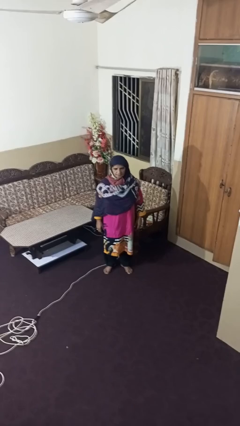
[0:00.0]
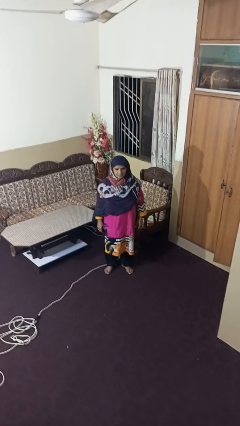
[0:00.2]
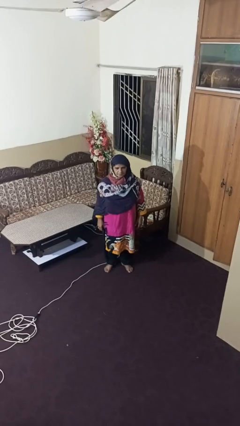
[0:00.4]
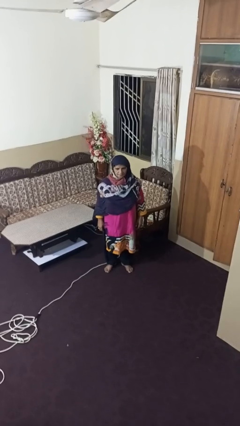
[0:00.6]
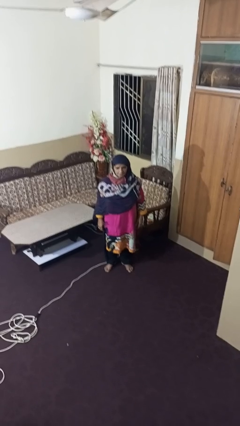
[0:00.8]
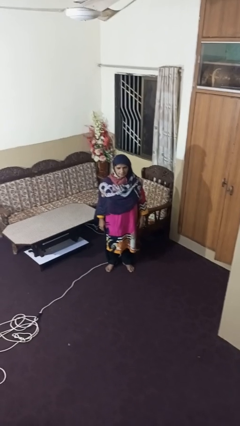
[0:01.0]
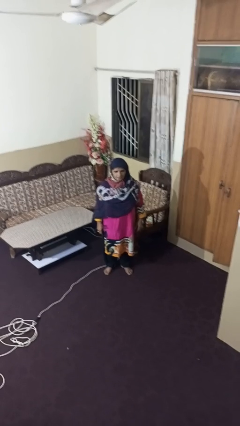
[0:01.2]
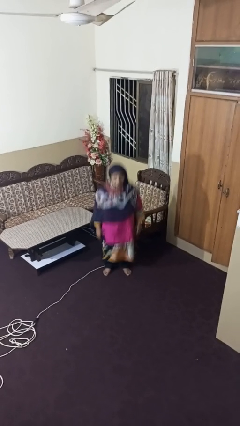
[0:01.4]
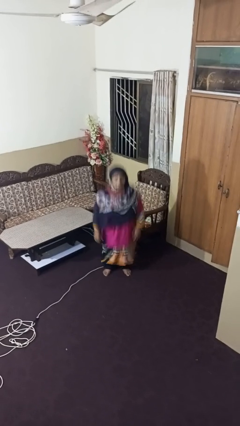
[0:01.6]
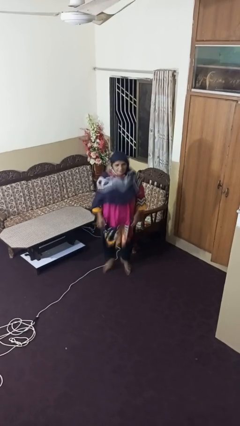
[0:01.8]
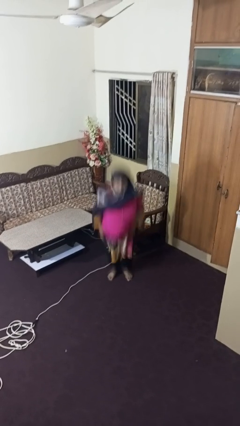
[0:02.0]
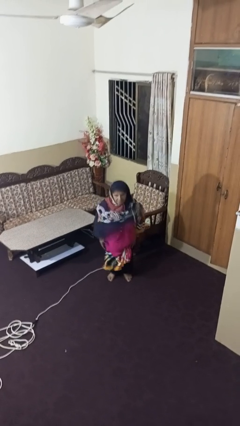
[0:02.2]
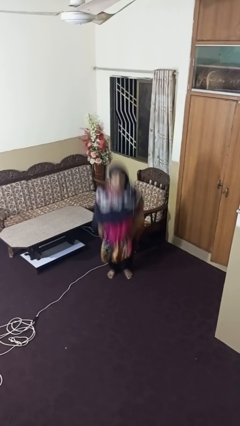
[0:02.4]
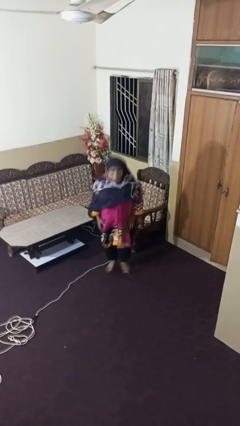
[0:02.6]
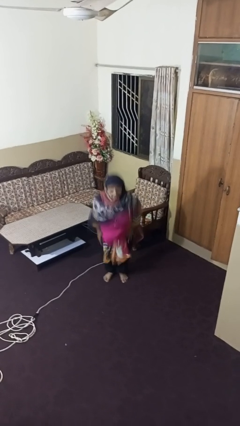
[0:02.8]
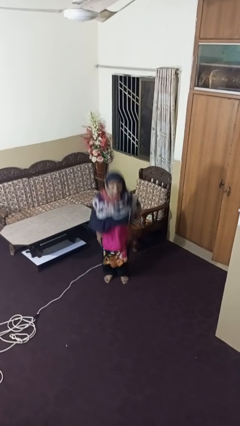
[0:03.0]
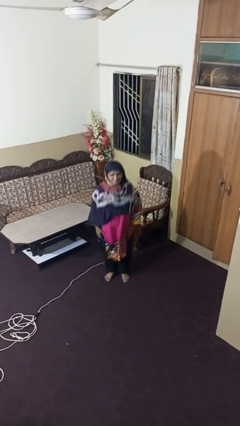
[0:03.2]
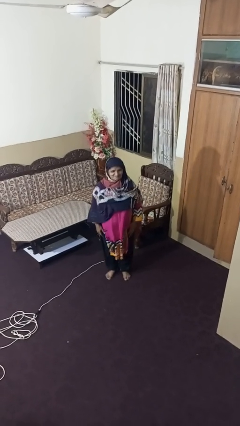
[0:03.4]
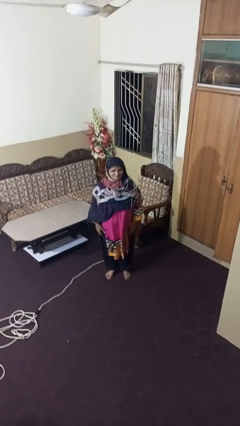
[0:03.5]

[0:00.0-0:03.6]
person jumps

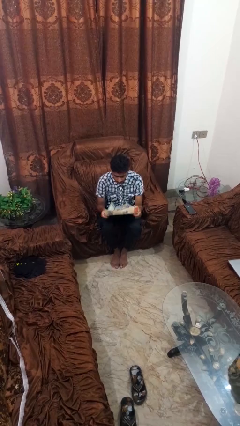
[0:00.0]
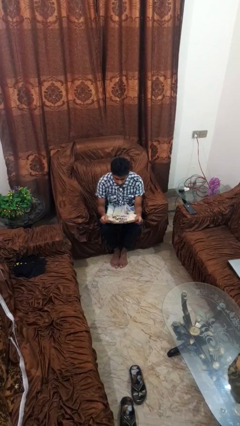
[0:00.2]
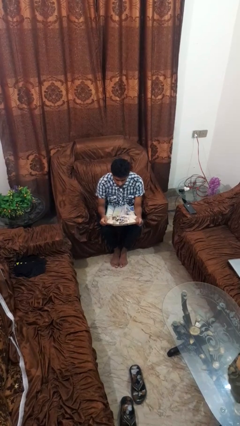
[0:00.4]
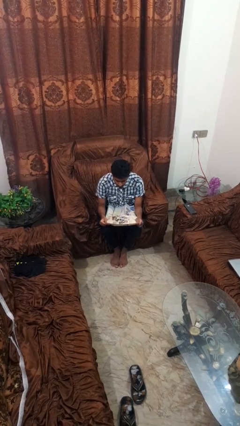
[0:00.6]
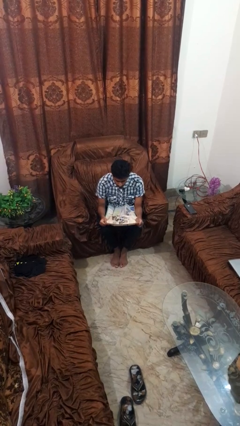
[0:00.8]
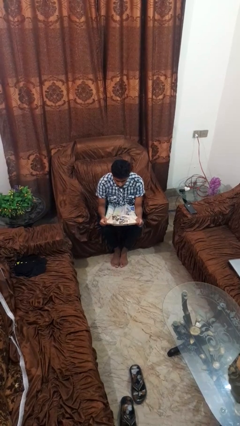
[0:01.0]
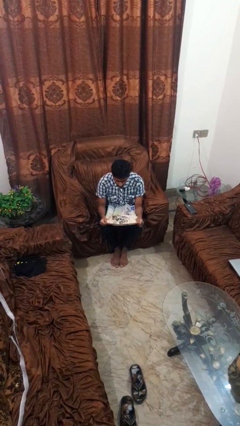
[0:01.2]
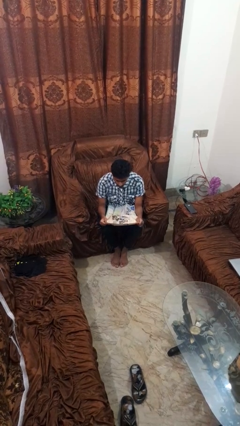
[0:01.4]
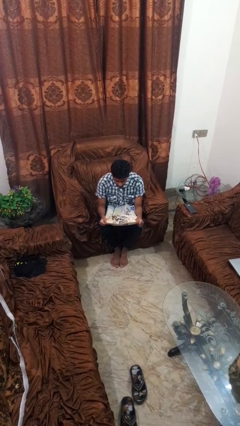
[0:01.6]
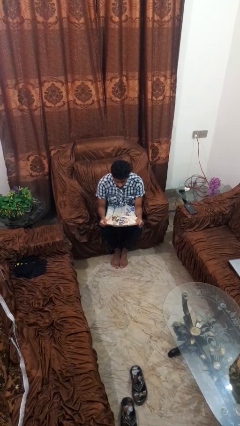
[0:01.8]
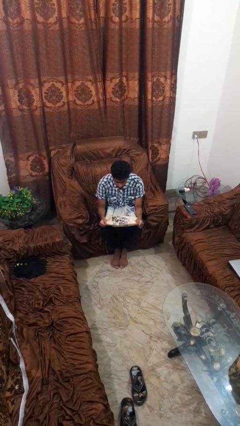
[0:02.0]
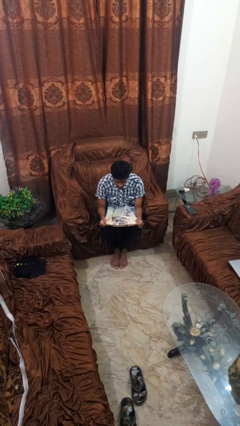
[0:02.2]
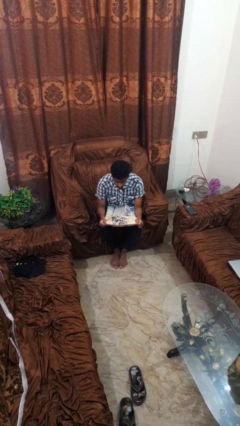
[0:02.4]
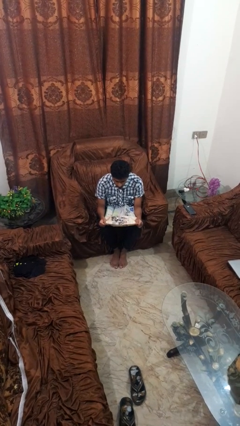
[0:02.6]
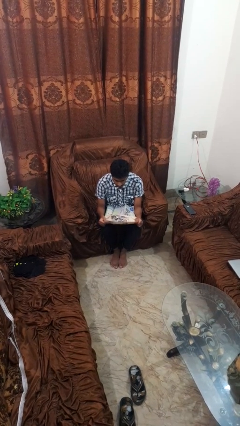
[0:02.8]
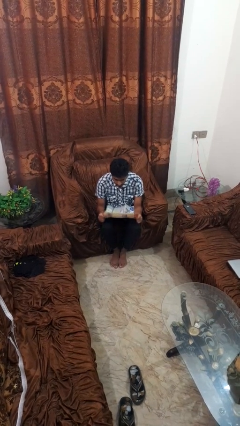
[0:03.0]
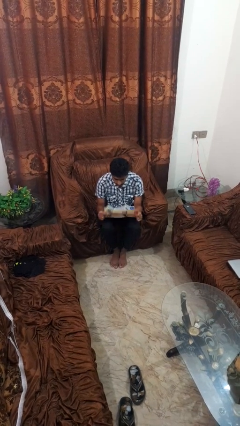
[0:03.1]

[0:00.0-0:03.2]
person reads newspaper

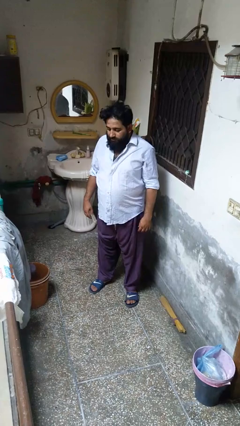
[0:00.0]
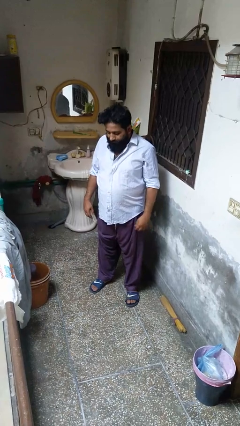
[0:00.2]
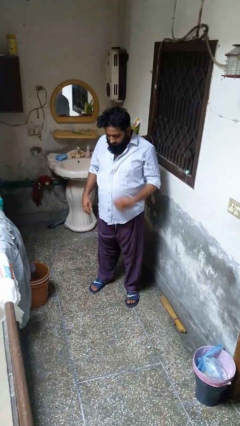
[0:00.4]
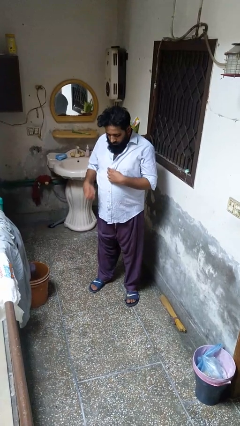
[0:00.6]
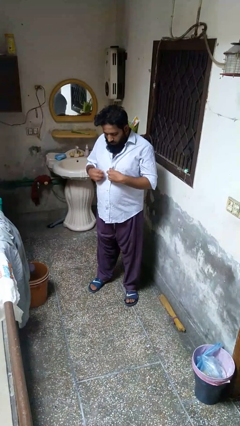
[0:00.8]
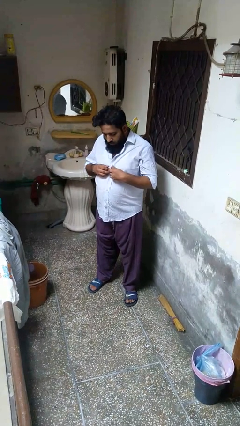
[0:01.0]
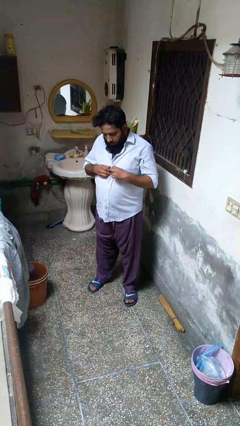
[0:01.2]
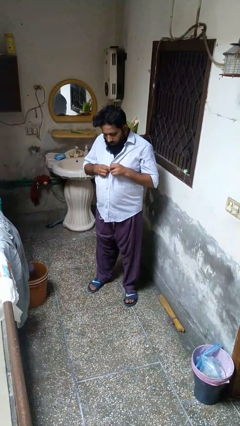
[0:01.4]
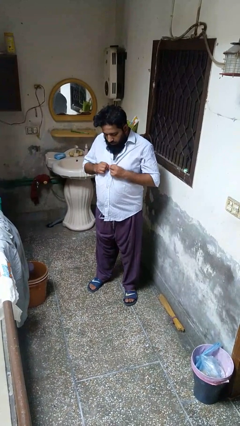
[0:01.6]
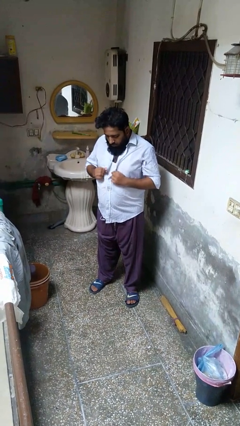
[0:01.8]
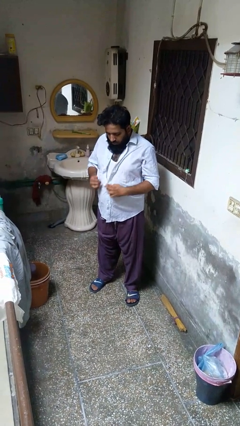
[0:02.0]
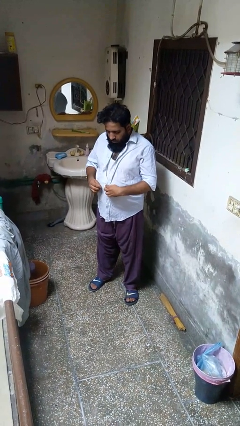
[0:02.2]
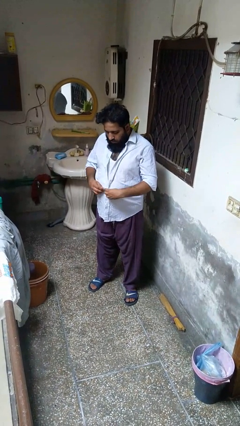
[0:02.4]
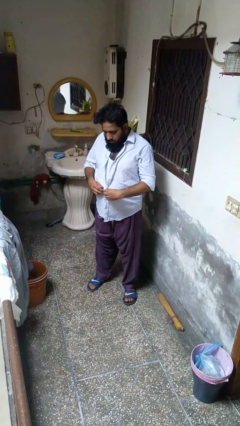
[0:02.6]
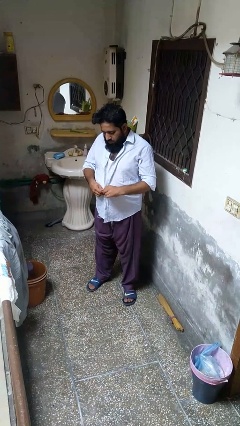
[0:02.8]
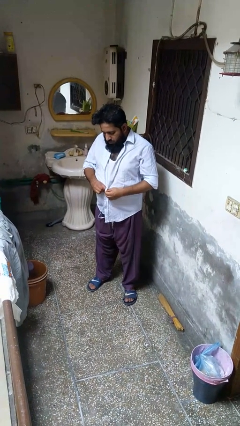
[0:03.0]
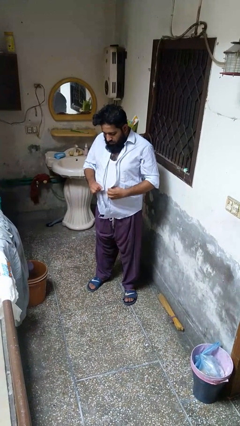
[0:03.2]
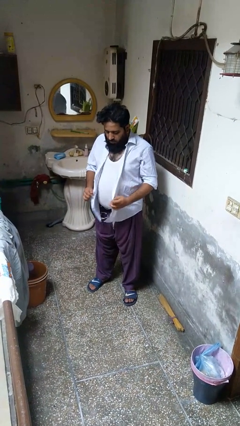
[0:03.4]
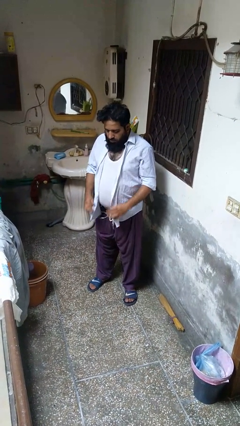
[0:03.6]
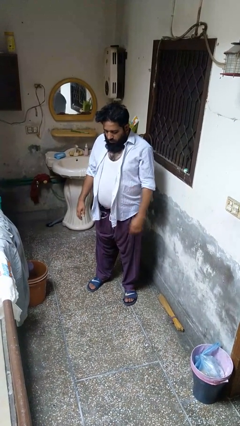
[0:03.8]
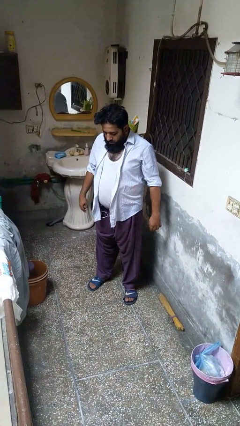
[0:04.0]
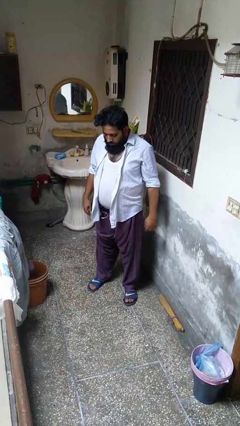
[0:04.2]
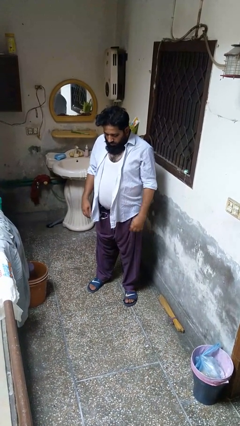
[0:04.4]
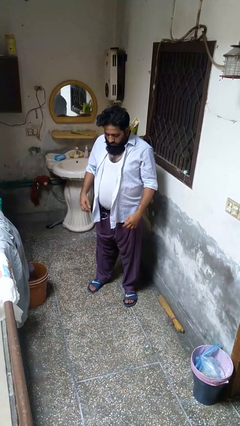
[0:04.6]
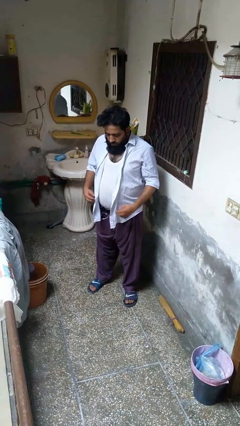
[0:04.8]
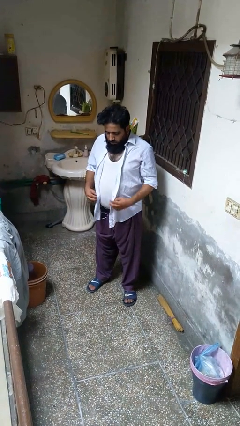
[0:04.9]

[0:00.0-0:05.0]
person unbuttons shirt

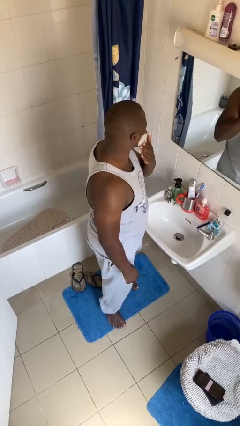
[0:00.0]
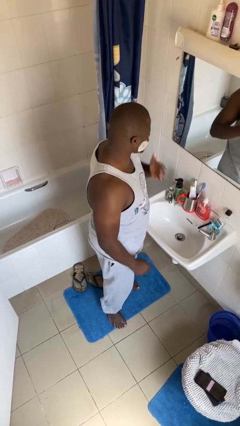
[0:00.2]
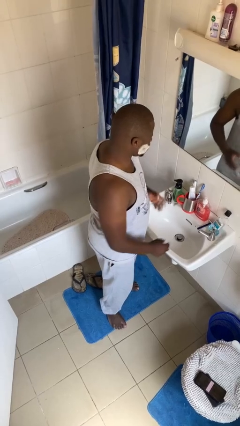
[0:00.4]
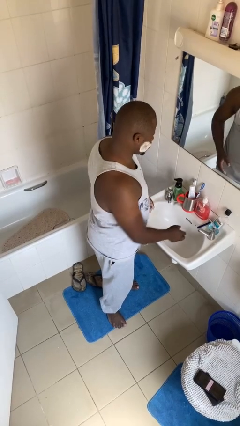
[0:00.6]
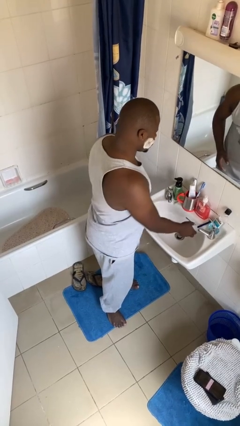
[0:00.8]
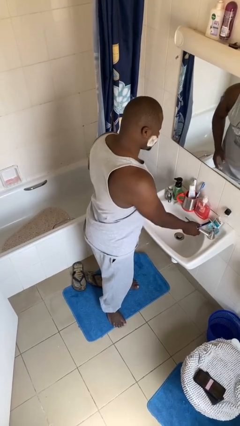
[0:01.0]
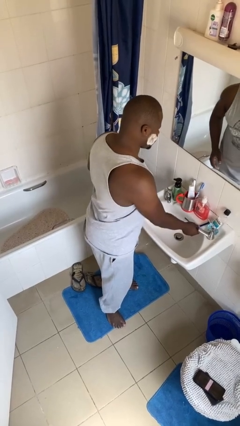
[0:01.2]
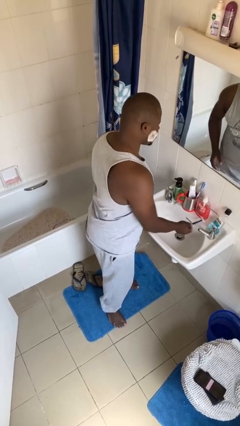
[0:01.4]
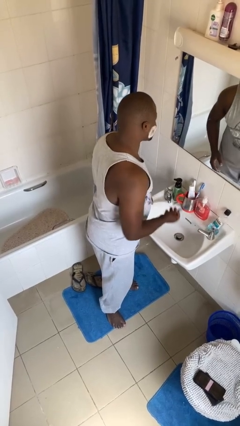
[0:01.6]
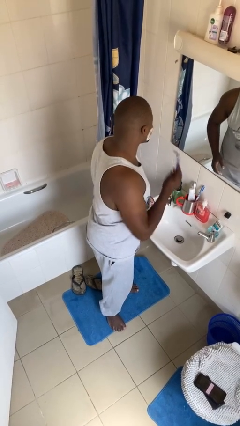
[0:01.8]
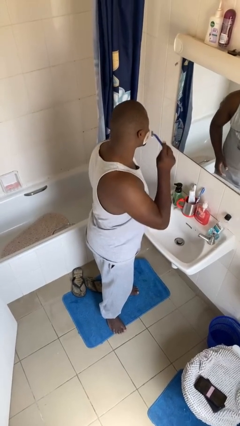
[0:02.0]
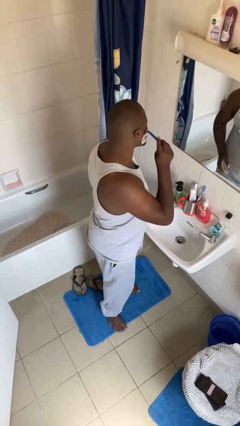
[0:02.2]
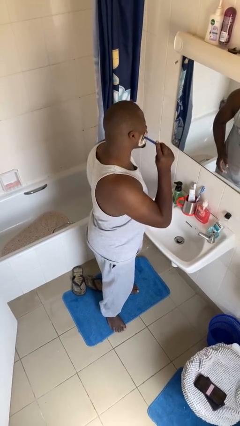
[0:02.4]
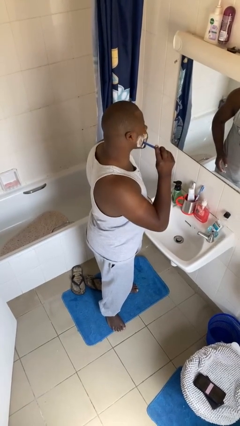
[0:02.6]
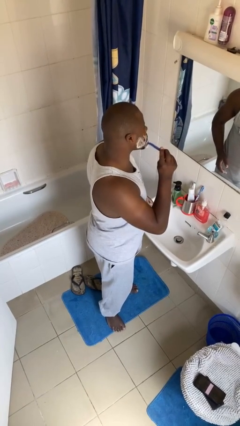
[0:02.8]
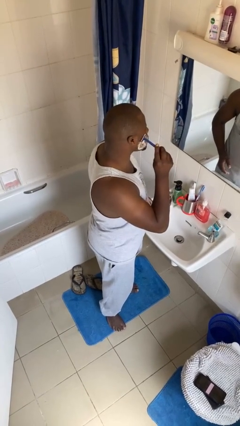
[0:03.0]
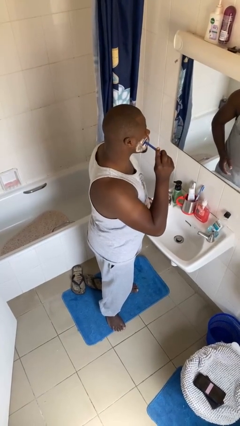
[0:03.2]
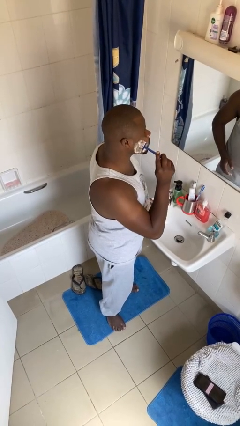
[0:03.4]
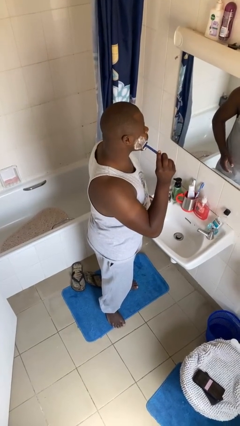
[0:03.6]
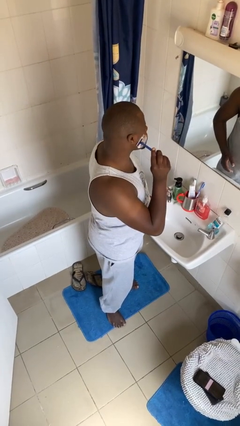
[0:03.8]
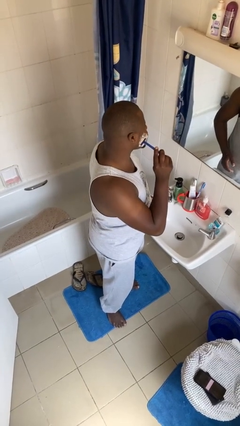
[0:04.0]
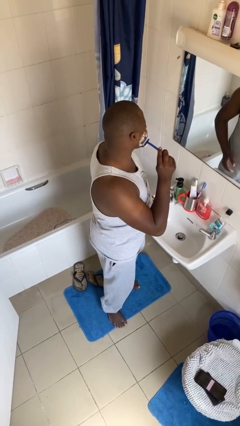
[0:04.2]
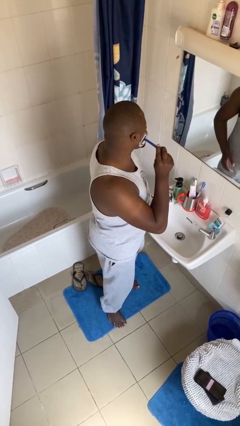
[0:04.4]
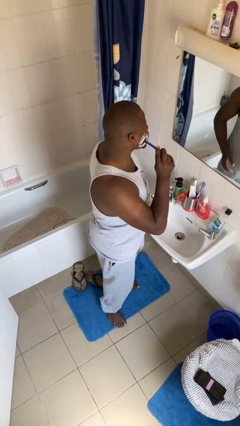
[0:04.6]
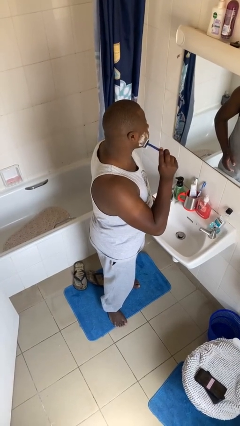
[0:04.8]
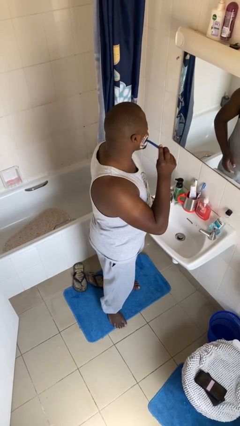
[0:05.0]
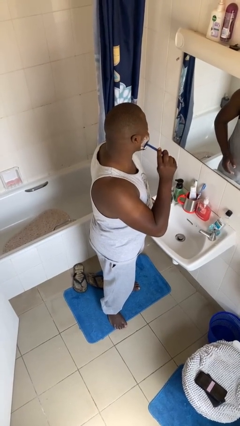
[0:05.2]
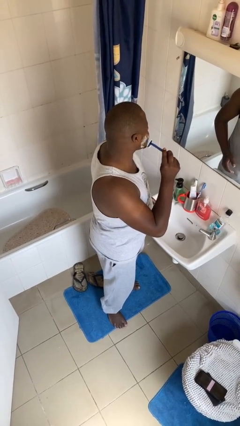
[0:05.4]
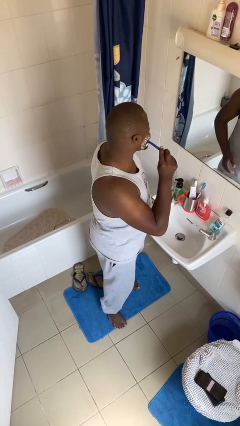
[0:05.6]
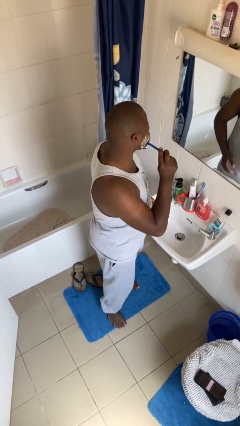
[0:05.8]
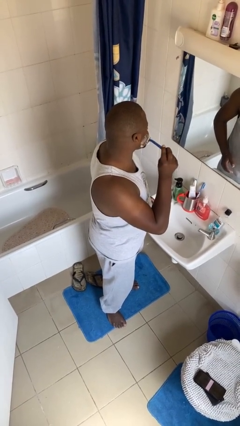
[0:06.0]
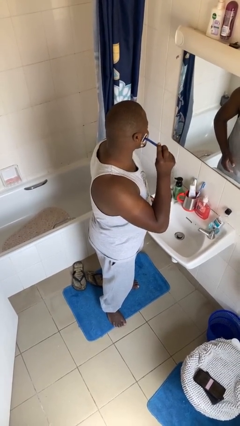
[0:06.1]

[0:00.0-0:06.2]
person shaves face
